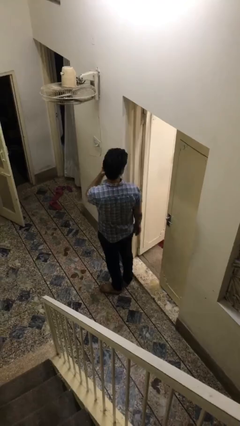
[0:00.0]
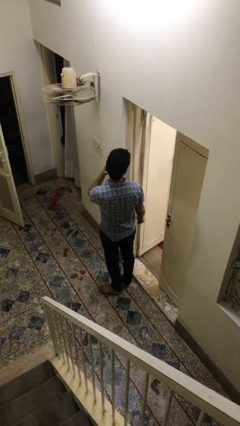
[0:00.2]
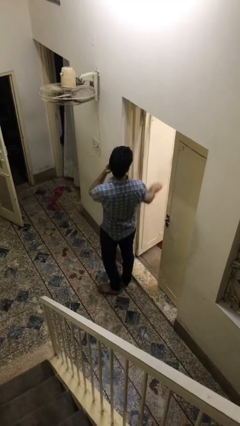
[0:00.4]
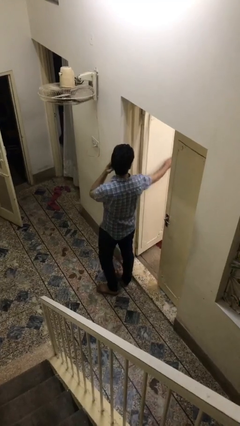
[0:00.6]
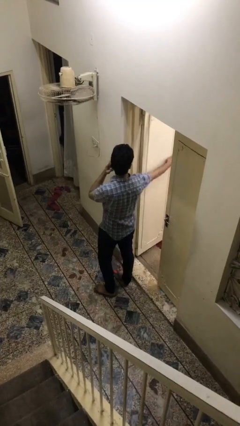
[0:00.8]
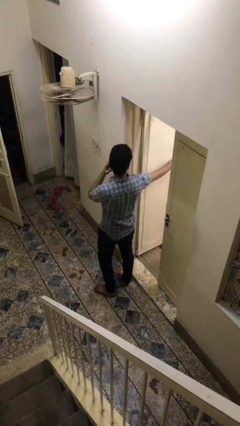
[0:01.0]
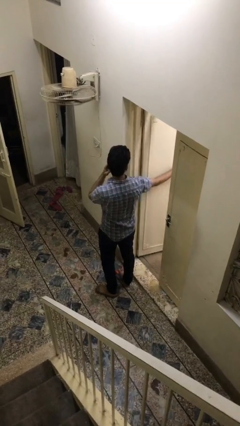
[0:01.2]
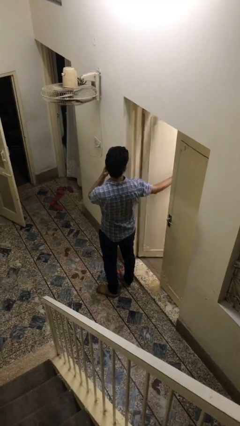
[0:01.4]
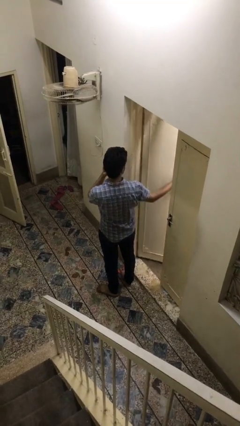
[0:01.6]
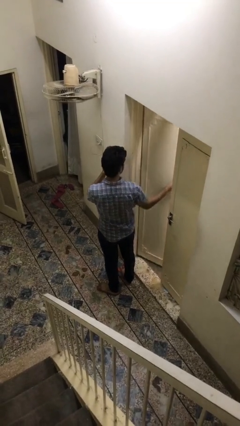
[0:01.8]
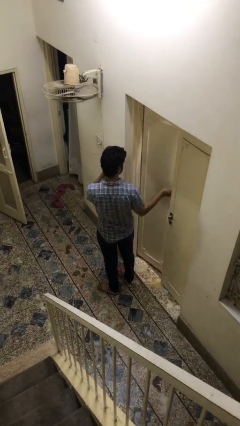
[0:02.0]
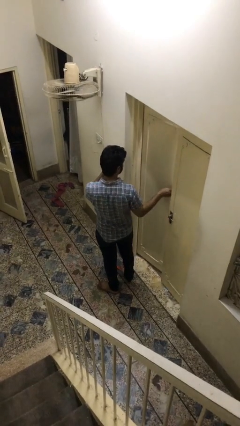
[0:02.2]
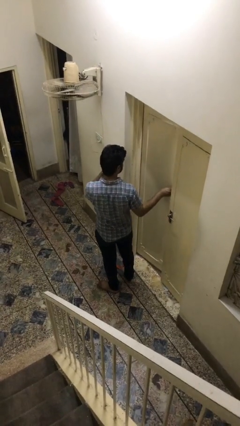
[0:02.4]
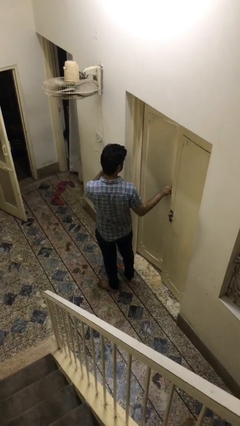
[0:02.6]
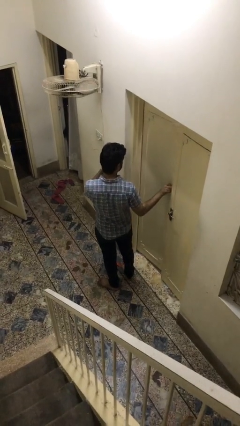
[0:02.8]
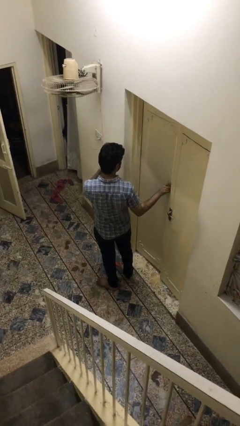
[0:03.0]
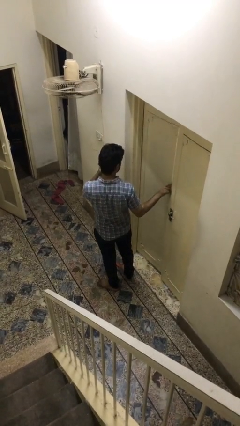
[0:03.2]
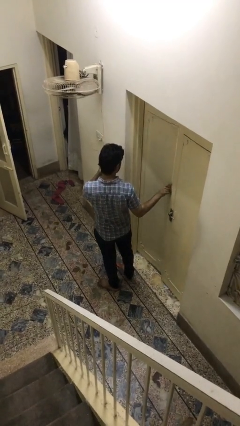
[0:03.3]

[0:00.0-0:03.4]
person closes facility door

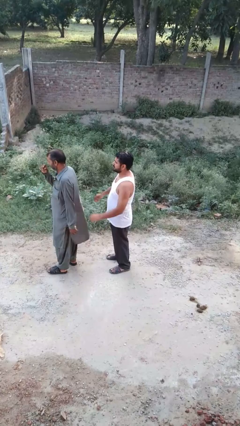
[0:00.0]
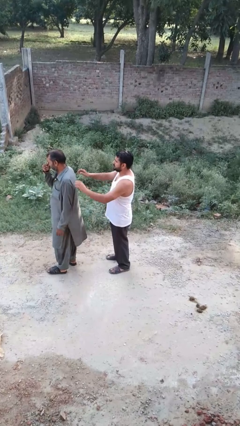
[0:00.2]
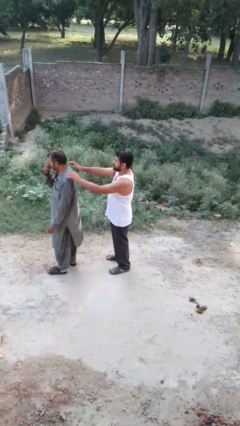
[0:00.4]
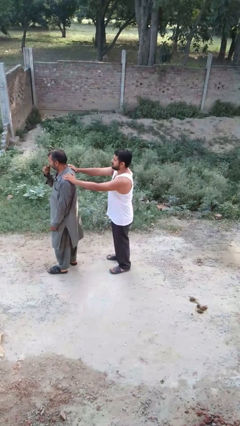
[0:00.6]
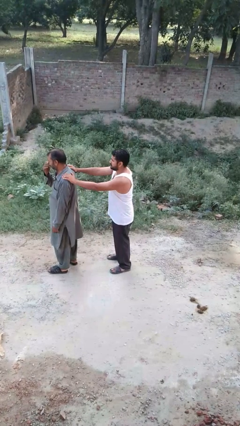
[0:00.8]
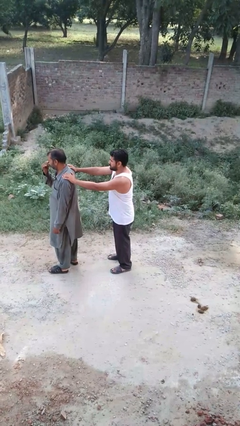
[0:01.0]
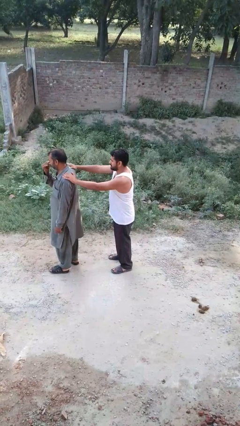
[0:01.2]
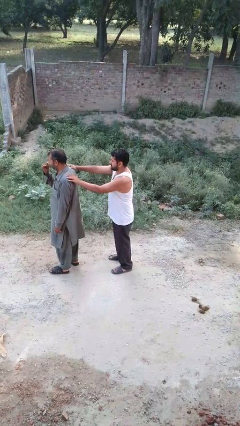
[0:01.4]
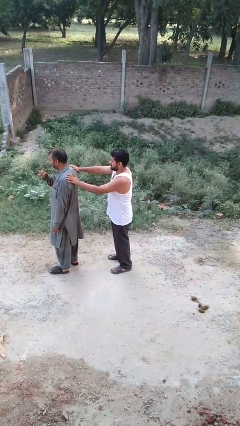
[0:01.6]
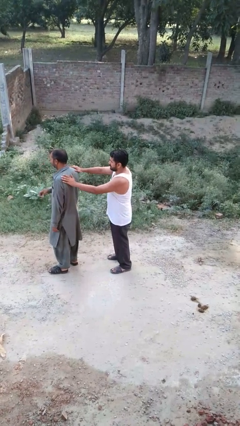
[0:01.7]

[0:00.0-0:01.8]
person grabs person by shoulder

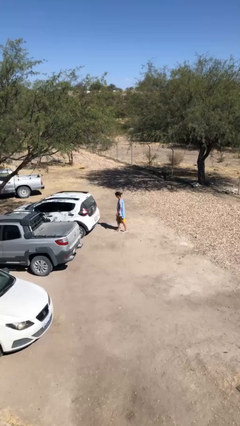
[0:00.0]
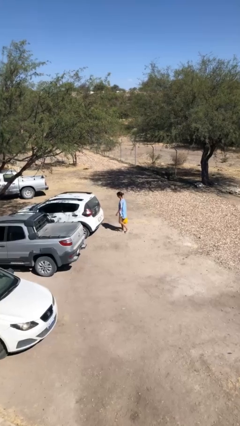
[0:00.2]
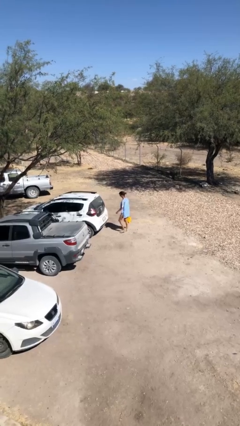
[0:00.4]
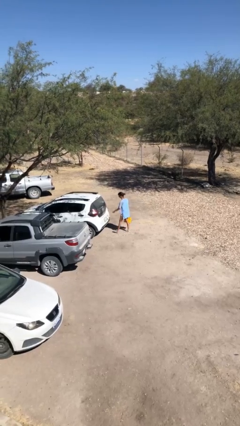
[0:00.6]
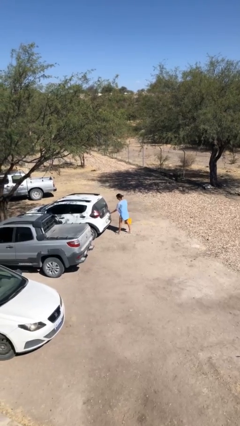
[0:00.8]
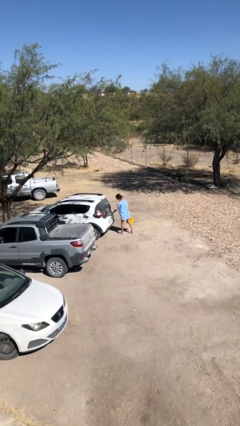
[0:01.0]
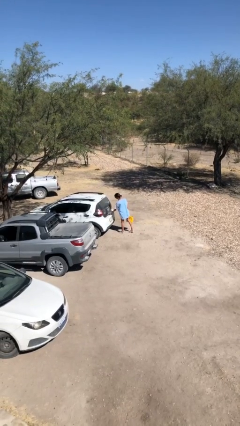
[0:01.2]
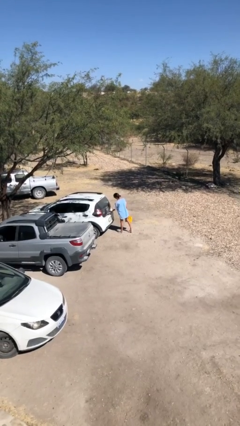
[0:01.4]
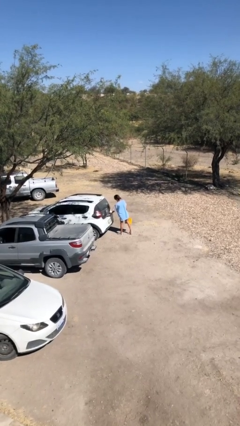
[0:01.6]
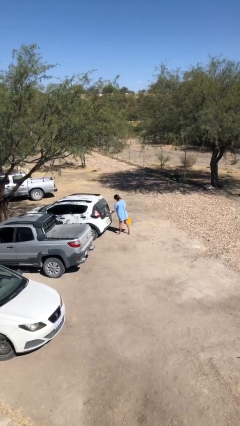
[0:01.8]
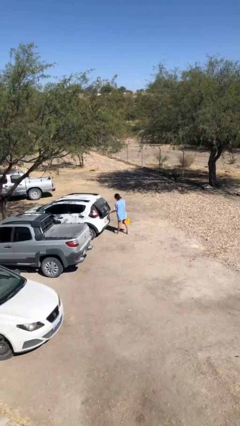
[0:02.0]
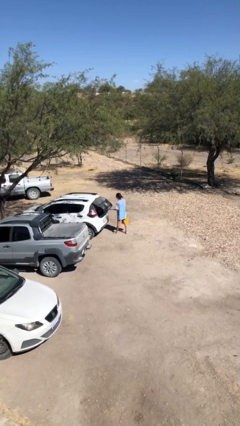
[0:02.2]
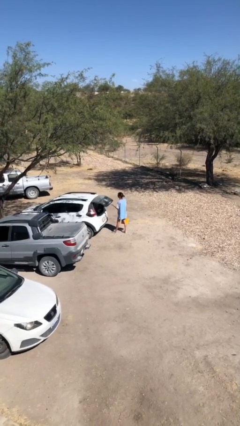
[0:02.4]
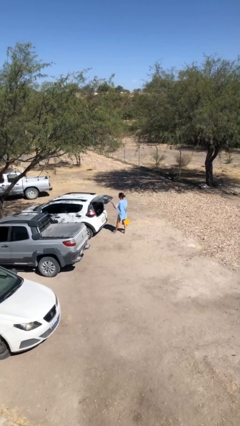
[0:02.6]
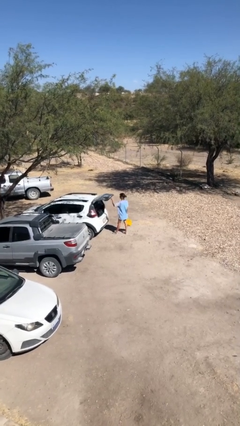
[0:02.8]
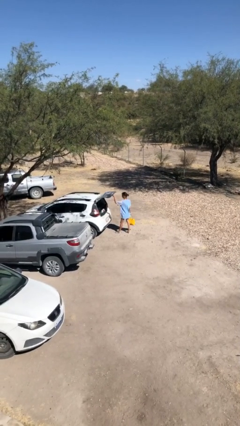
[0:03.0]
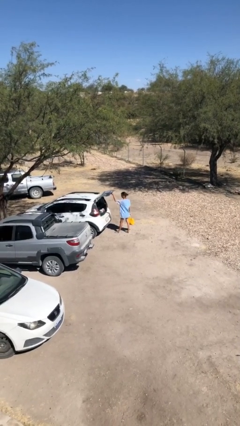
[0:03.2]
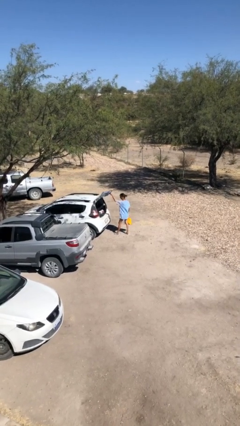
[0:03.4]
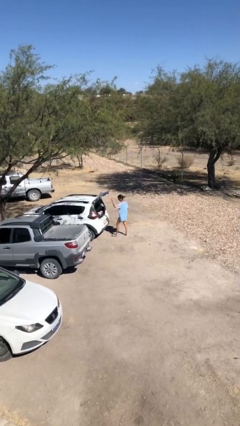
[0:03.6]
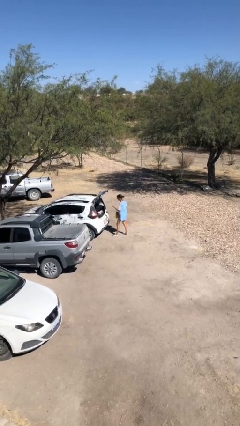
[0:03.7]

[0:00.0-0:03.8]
person opens car trunk

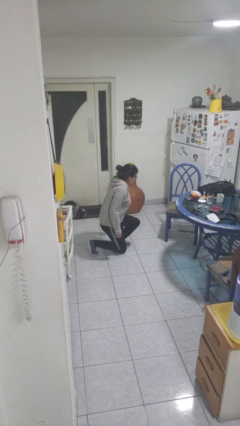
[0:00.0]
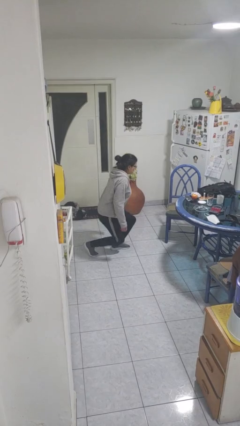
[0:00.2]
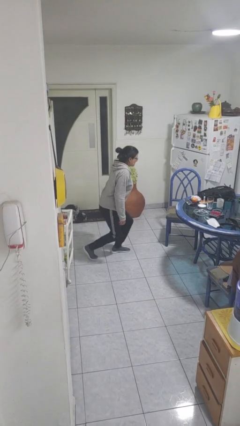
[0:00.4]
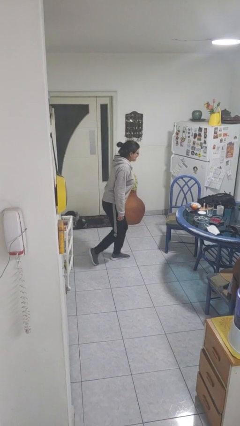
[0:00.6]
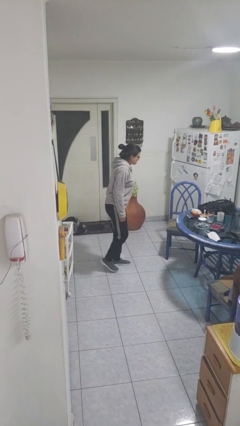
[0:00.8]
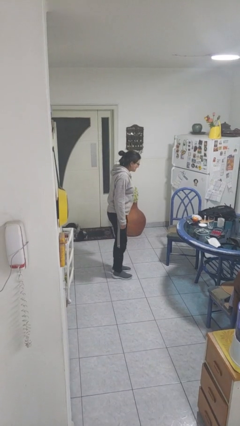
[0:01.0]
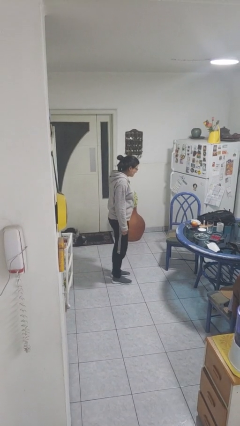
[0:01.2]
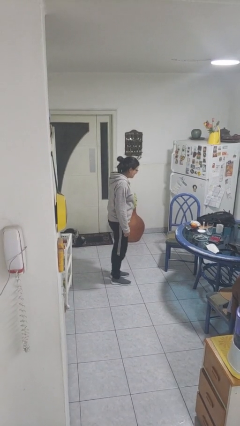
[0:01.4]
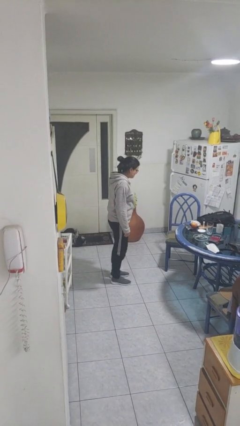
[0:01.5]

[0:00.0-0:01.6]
person stands up from floor

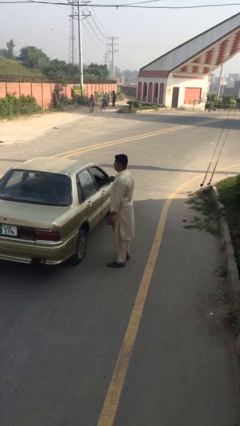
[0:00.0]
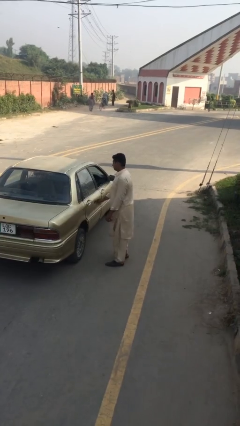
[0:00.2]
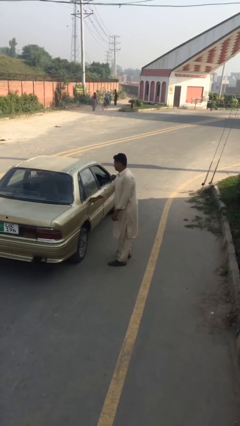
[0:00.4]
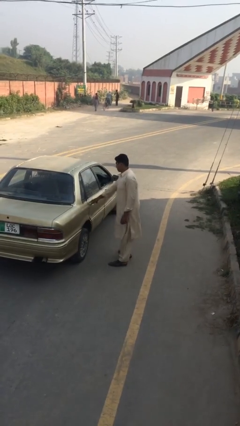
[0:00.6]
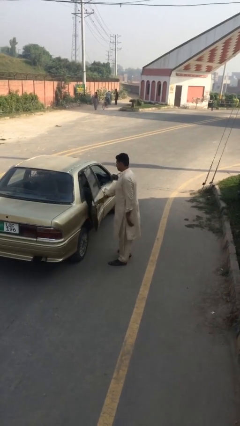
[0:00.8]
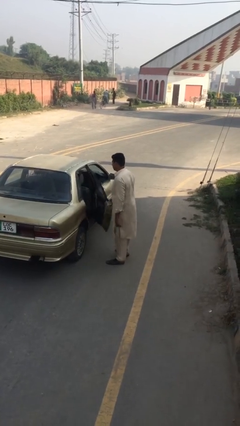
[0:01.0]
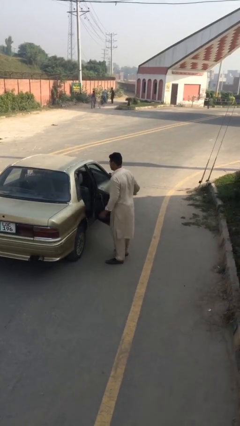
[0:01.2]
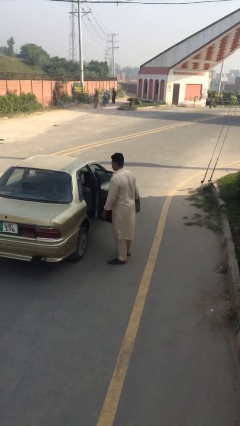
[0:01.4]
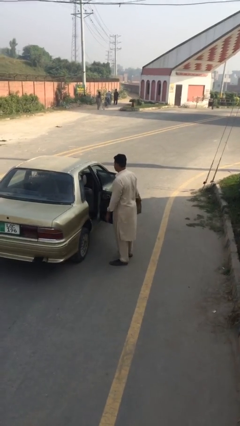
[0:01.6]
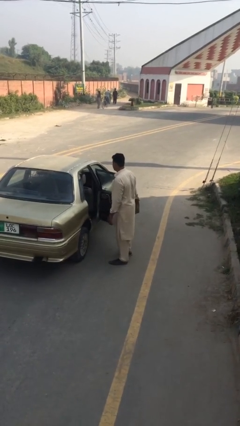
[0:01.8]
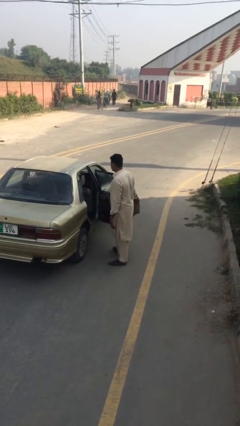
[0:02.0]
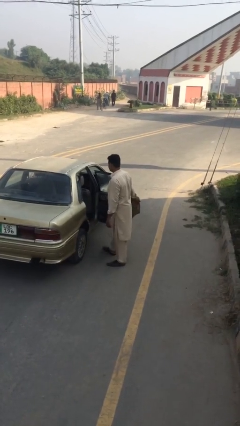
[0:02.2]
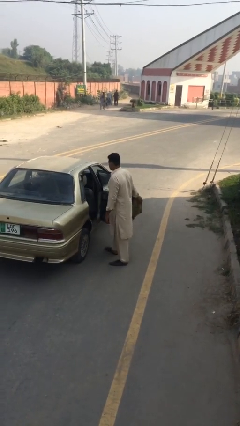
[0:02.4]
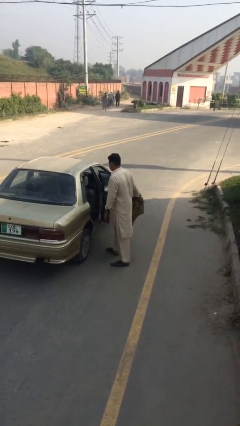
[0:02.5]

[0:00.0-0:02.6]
person opens car door

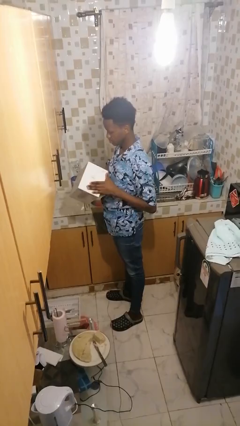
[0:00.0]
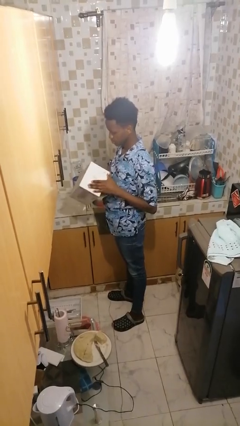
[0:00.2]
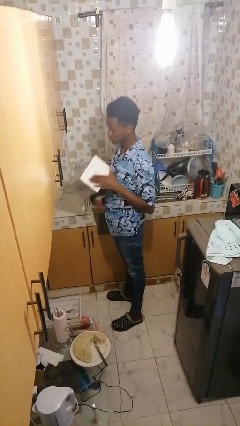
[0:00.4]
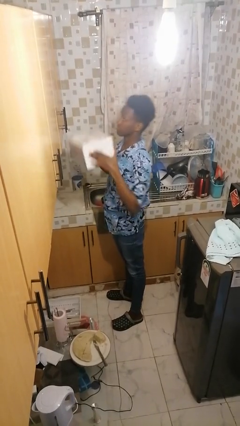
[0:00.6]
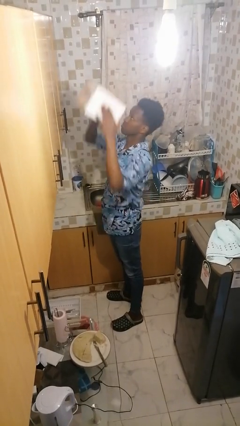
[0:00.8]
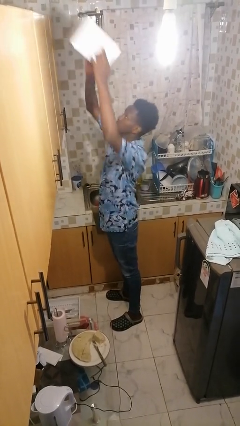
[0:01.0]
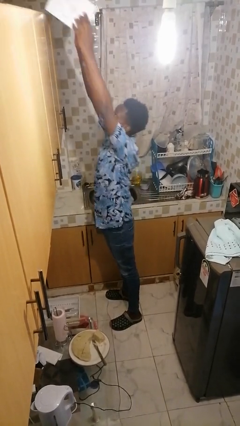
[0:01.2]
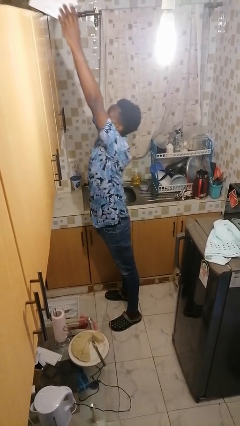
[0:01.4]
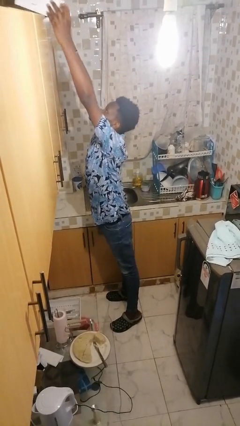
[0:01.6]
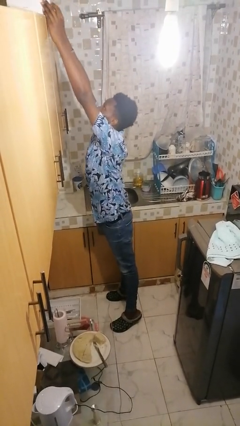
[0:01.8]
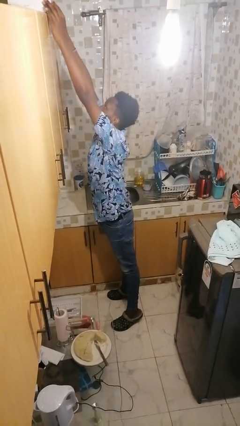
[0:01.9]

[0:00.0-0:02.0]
person puts down object on shelf

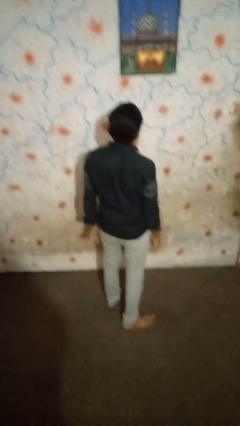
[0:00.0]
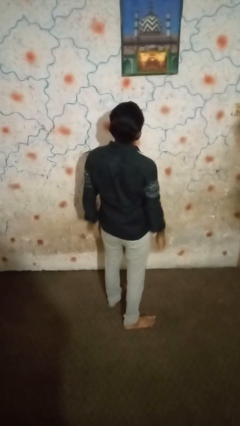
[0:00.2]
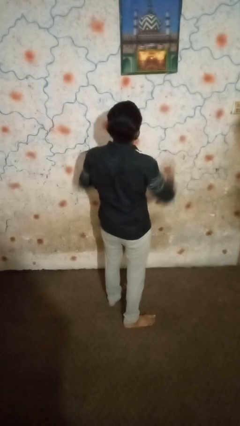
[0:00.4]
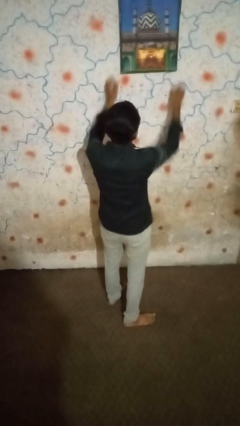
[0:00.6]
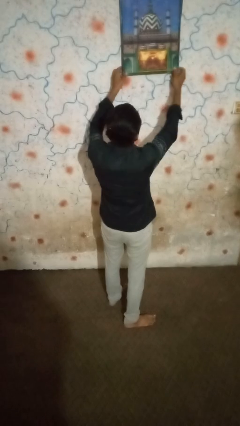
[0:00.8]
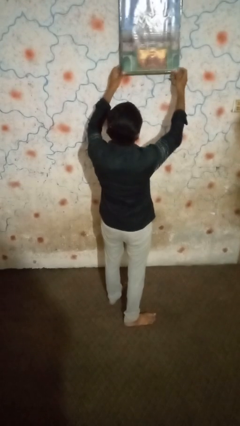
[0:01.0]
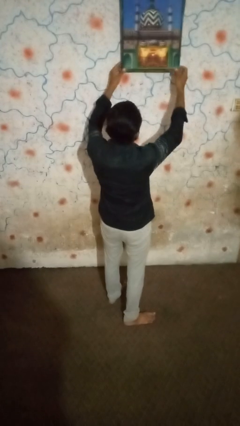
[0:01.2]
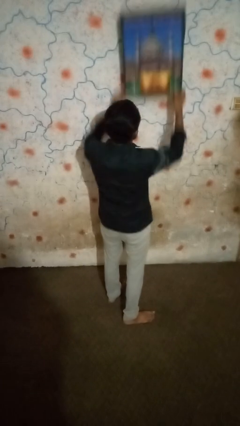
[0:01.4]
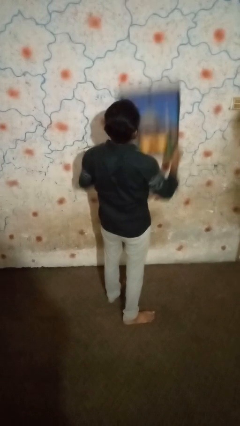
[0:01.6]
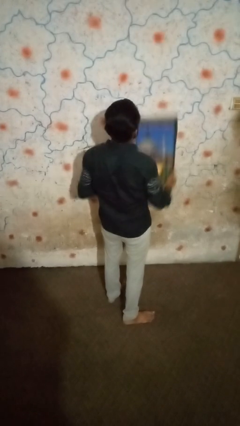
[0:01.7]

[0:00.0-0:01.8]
person takes down picture frame
